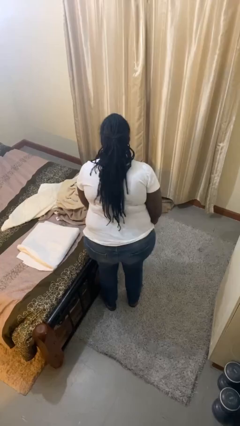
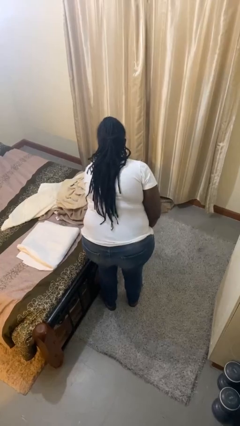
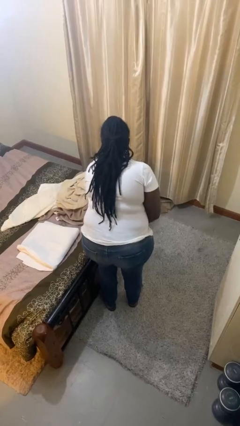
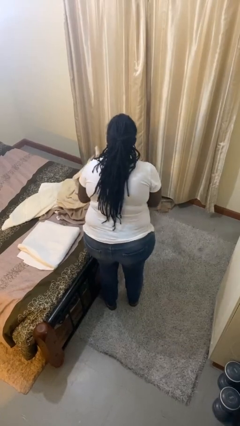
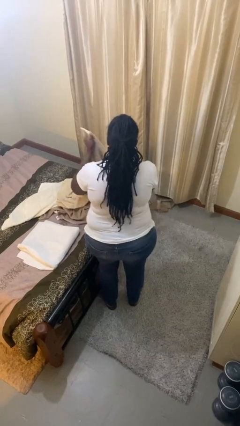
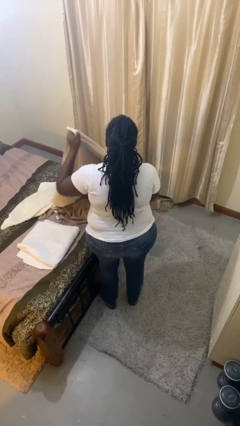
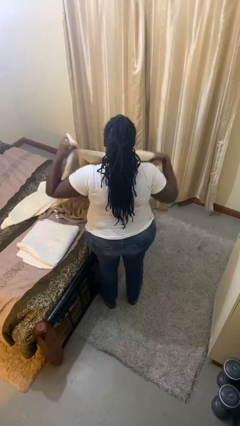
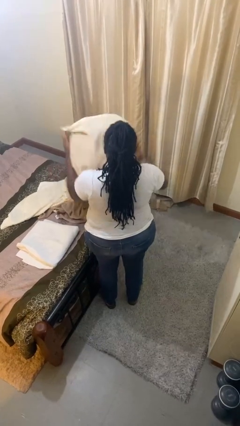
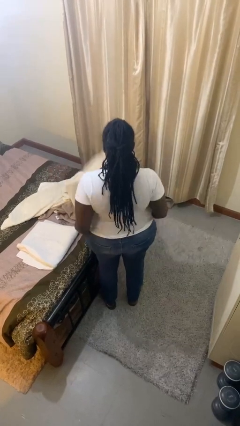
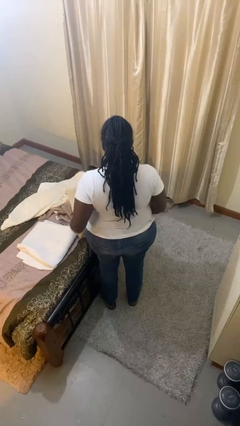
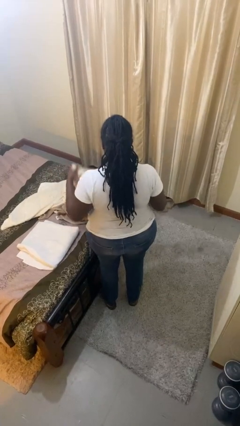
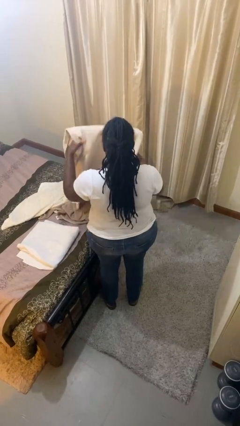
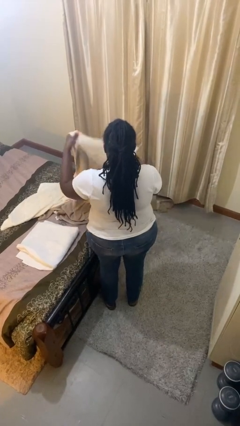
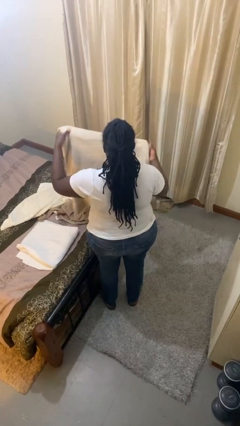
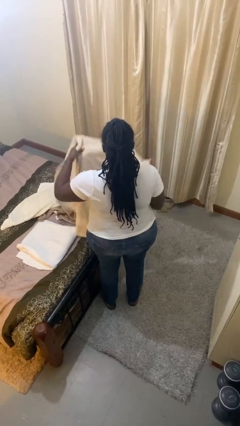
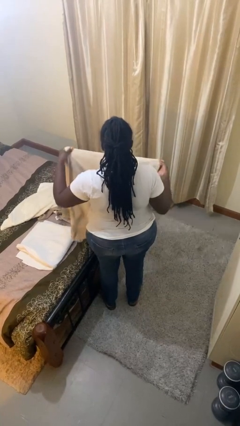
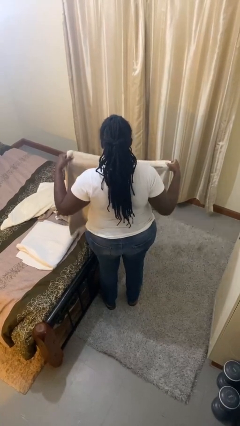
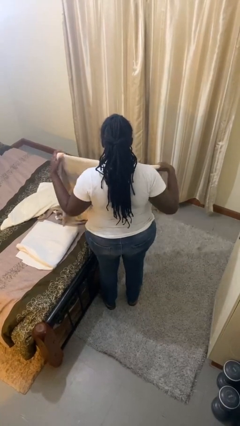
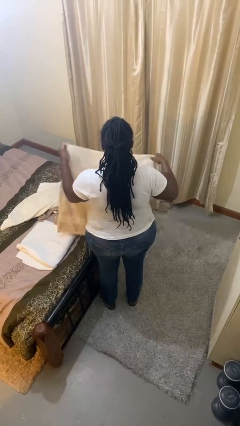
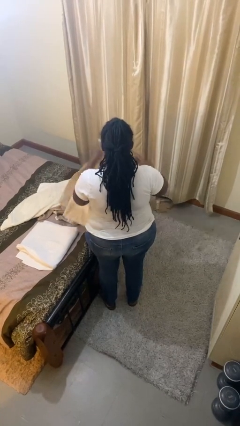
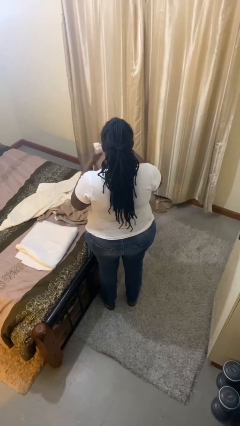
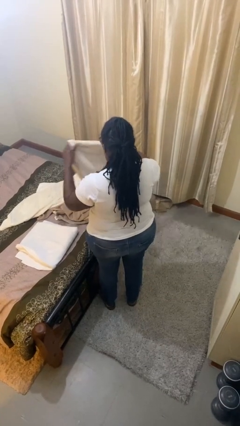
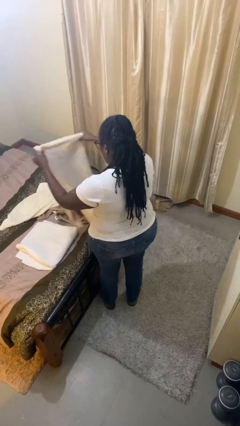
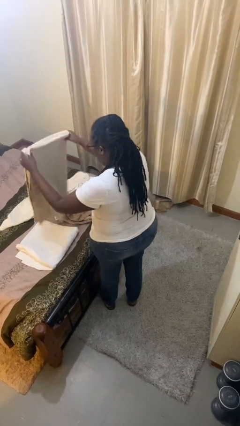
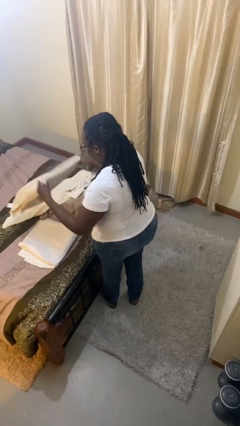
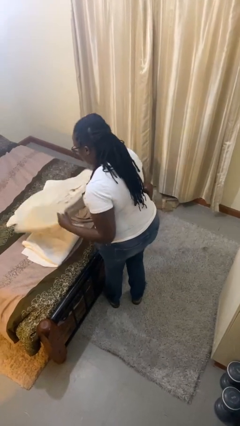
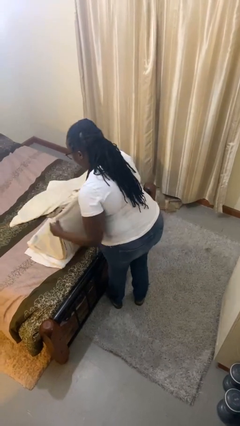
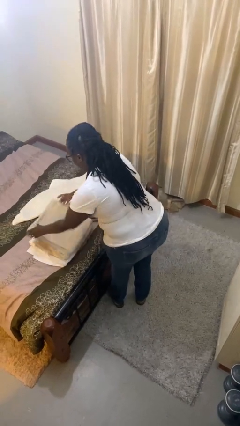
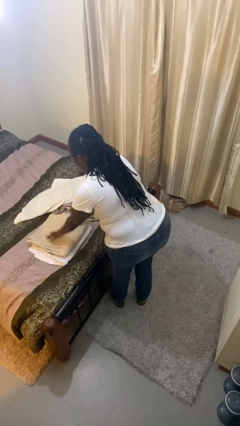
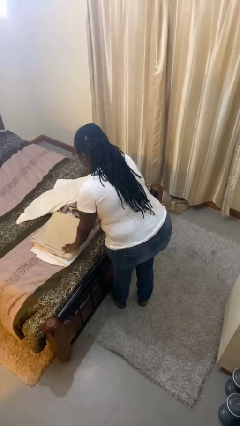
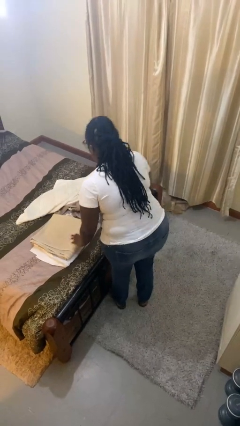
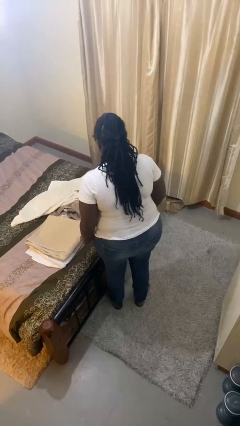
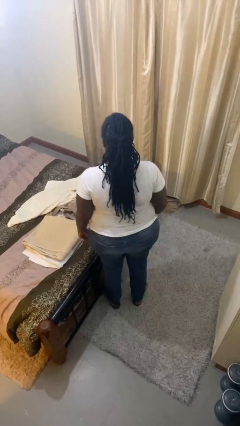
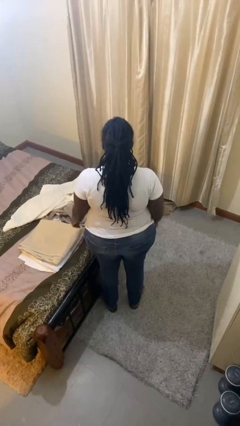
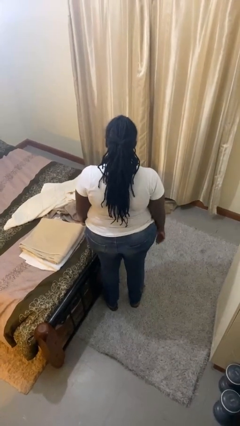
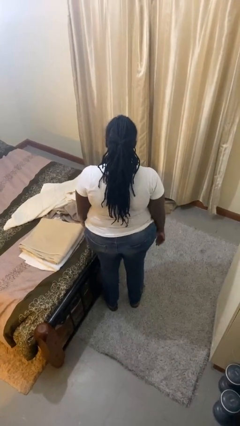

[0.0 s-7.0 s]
person folds towel

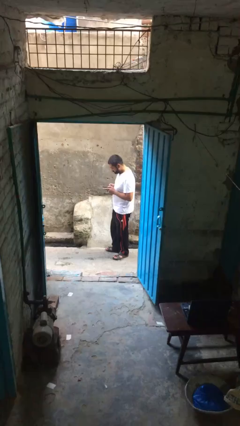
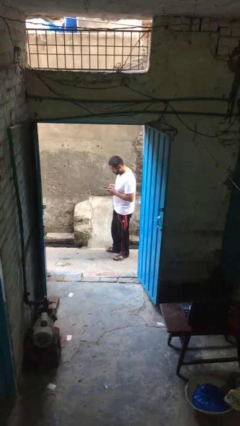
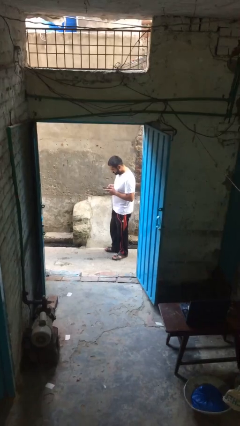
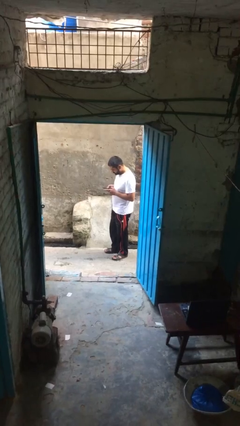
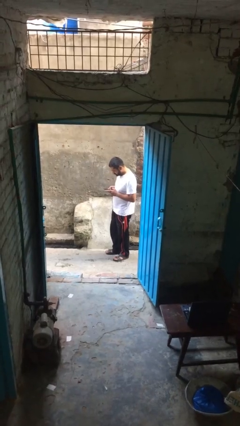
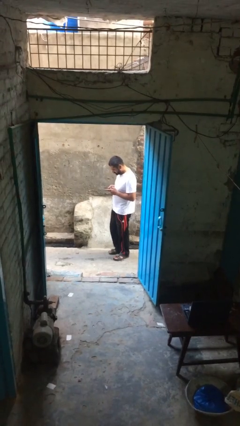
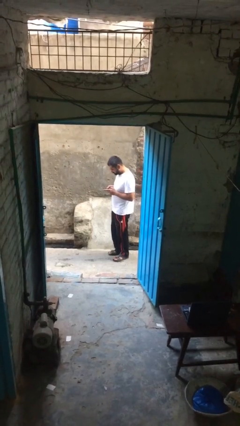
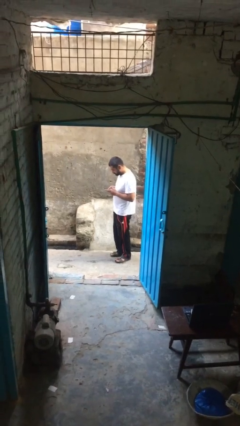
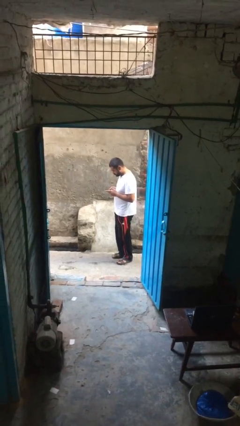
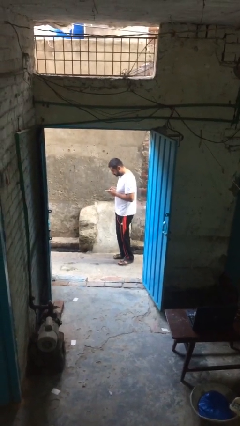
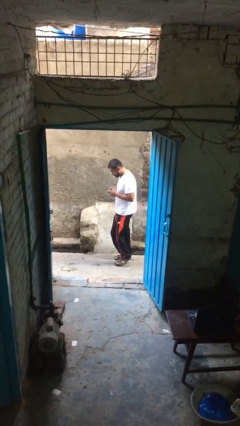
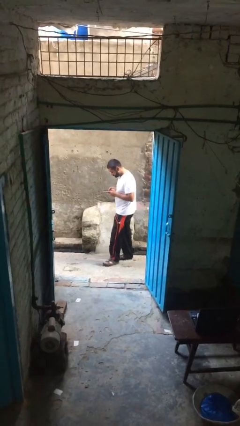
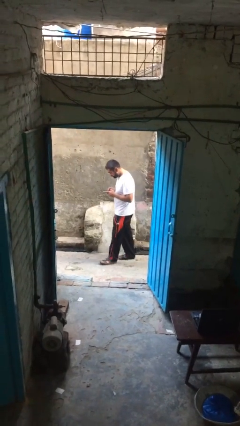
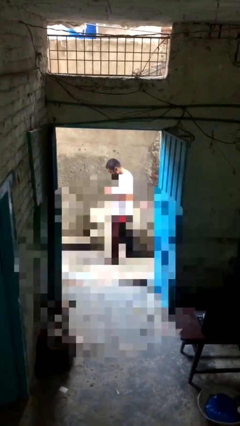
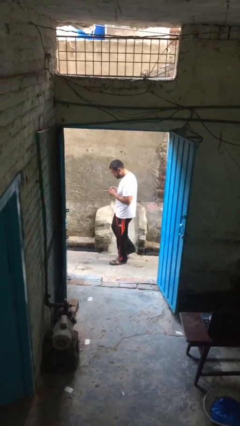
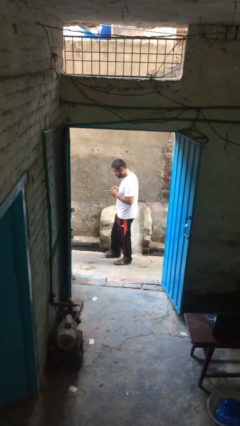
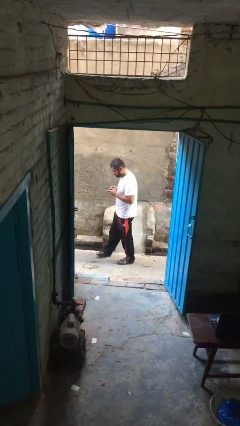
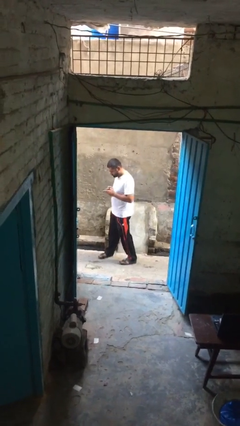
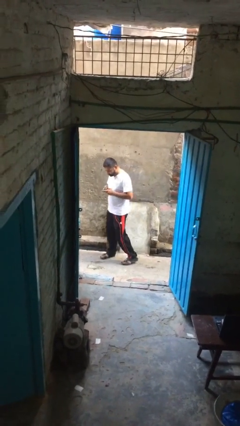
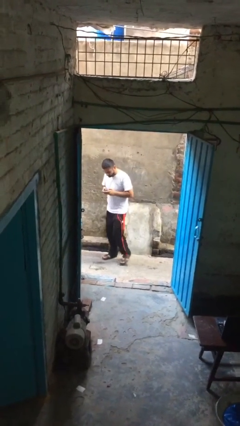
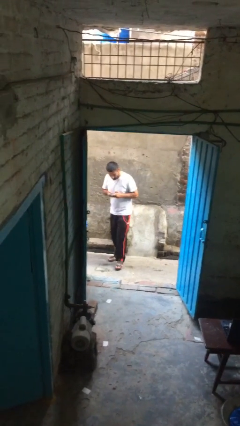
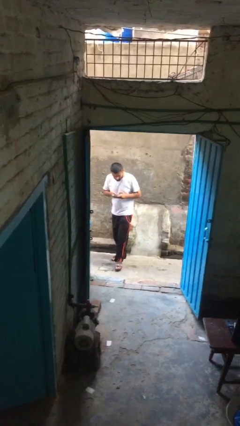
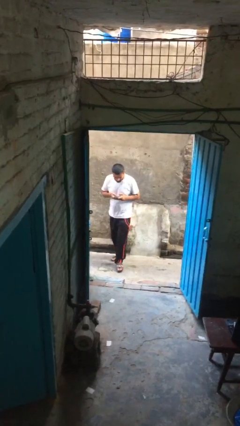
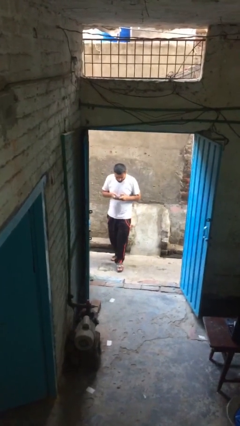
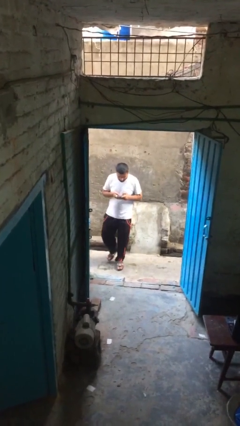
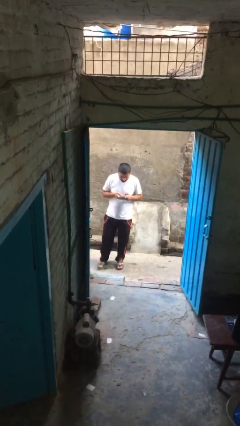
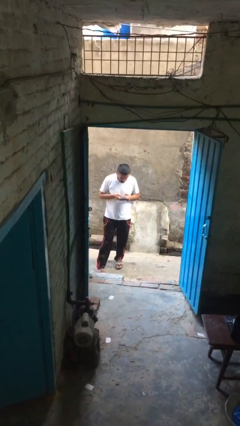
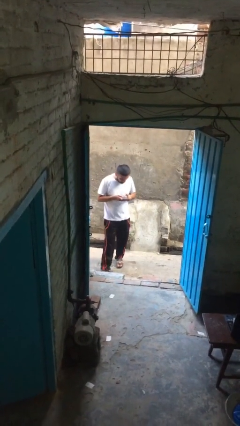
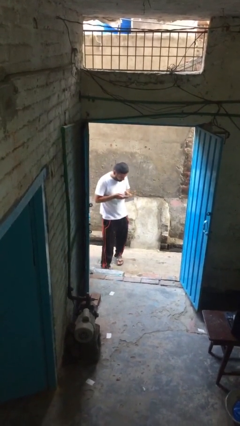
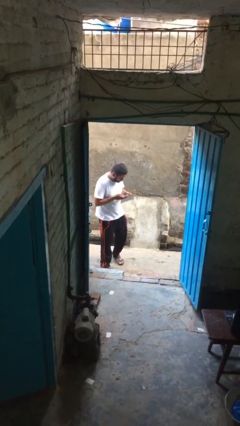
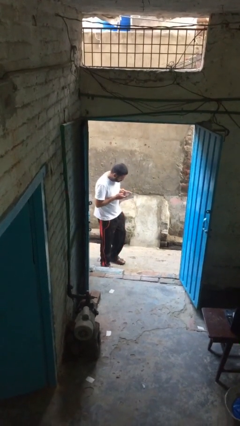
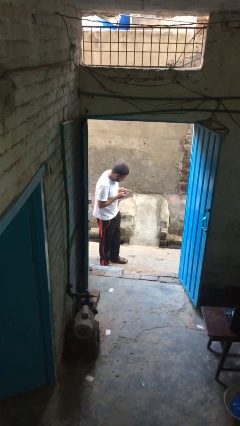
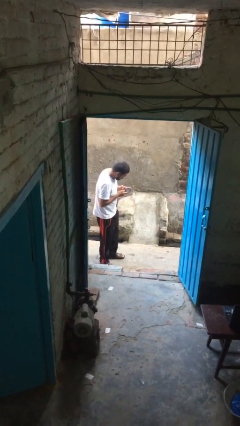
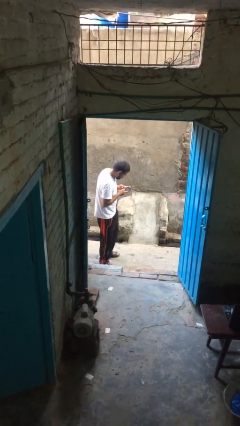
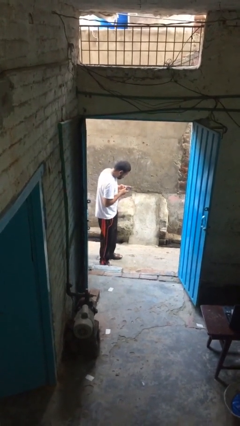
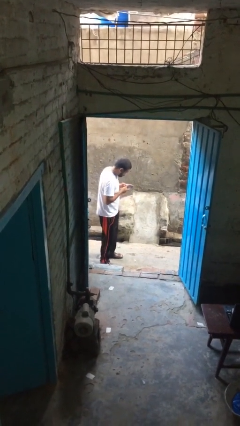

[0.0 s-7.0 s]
person texts on phone

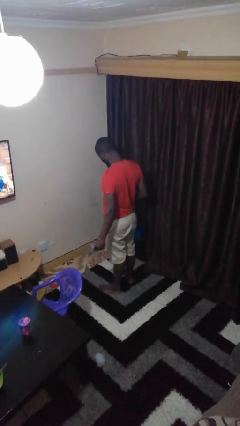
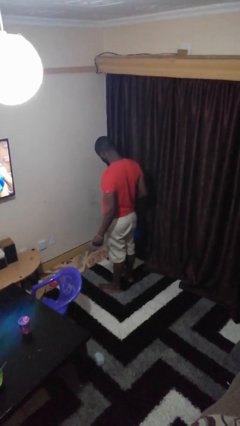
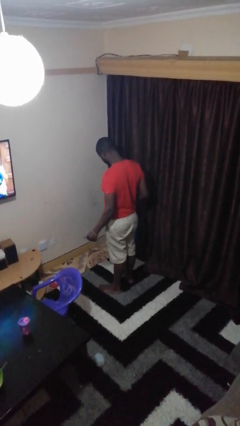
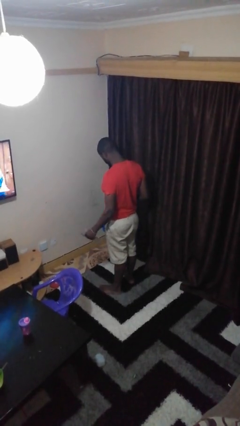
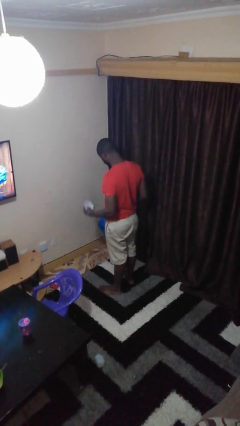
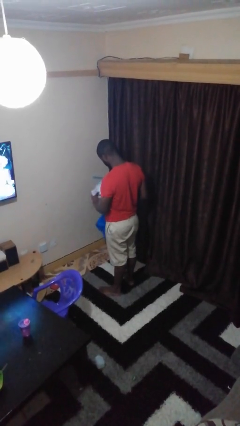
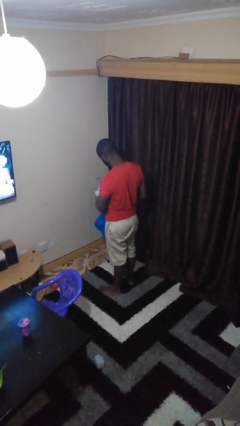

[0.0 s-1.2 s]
person takes object from bag

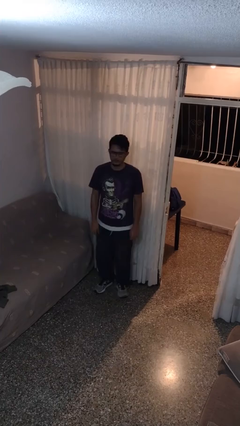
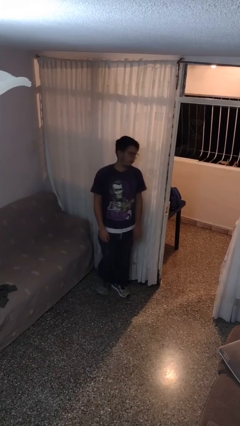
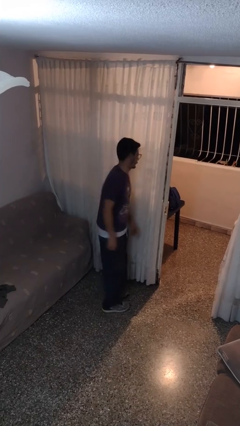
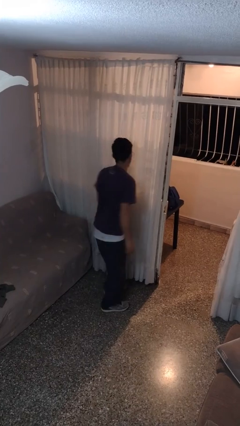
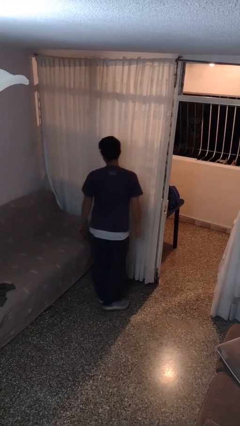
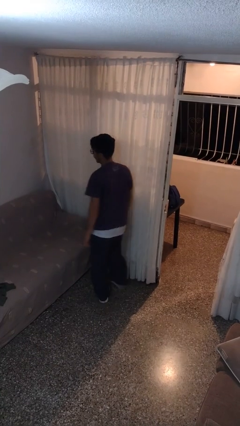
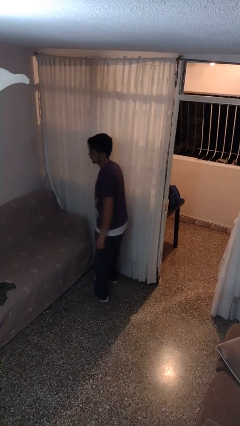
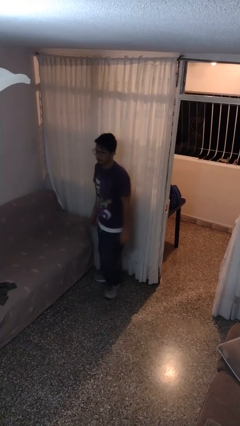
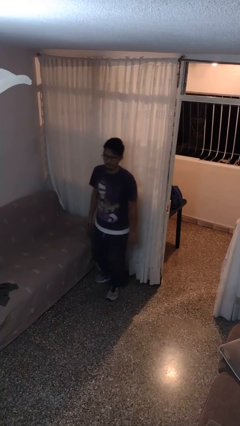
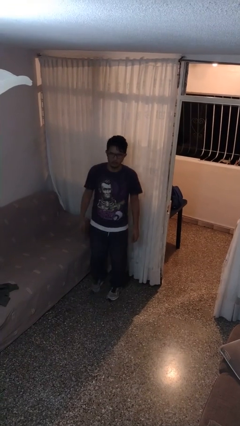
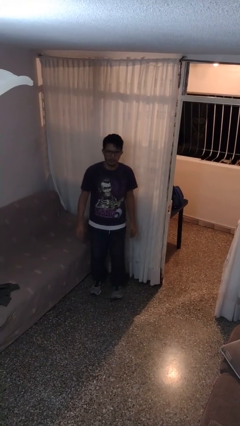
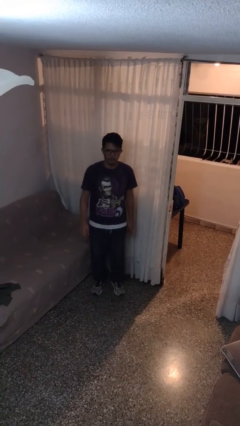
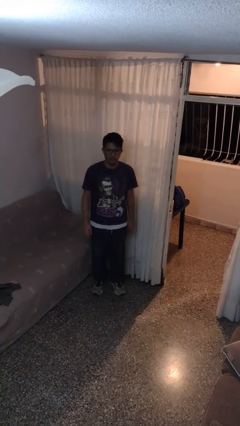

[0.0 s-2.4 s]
person twirls
